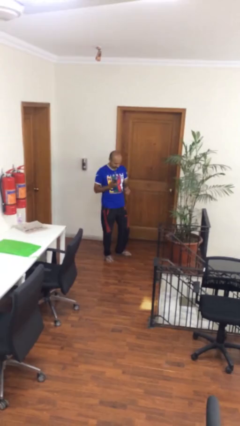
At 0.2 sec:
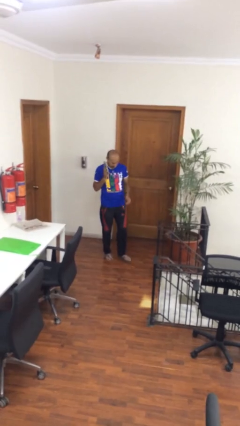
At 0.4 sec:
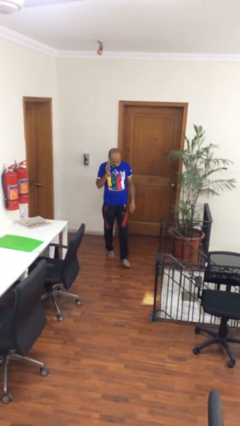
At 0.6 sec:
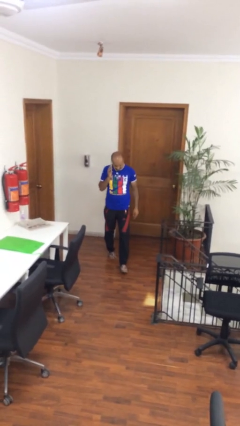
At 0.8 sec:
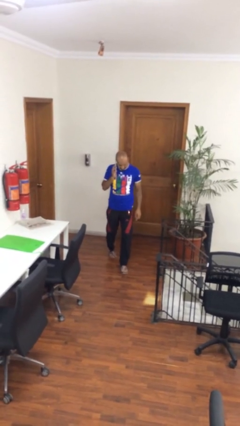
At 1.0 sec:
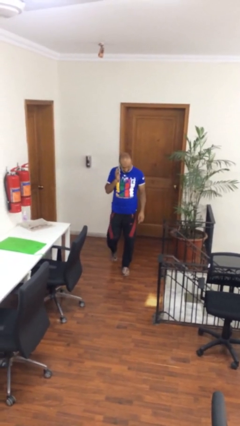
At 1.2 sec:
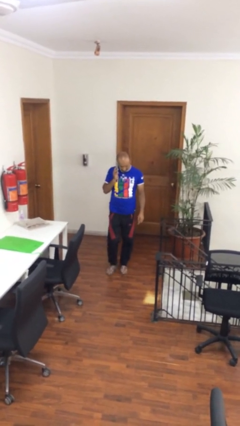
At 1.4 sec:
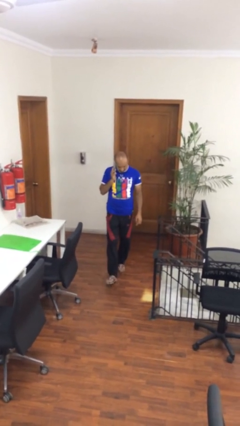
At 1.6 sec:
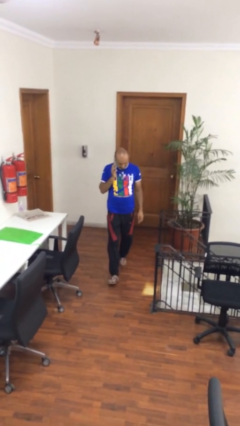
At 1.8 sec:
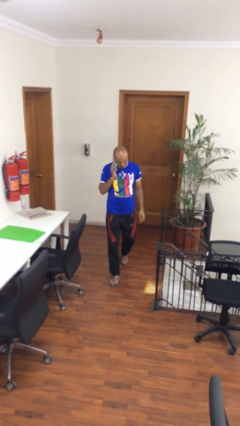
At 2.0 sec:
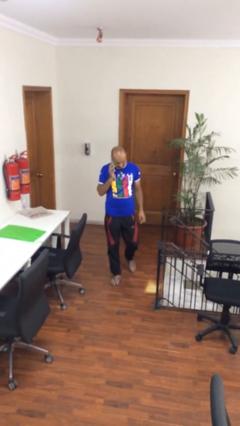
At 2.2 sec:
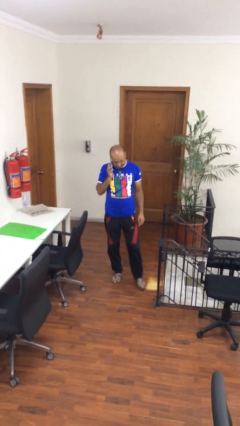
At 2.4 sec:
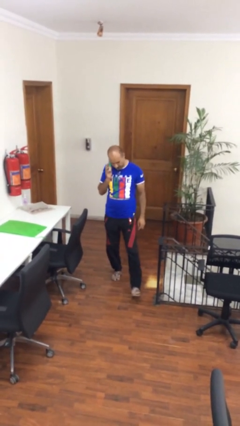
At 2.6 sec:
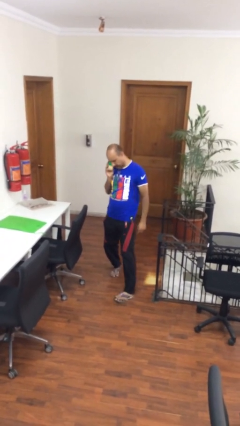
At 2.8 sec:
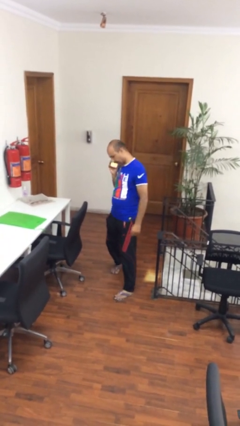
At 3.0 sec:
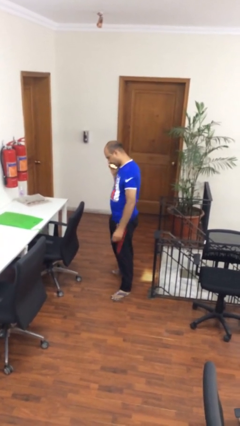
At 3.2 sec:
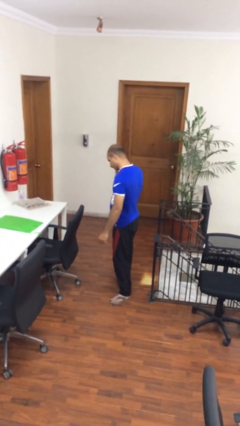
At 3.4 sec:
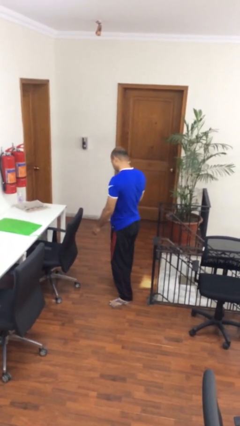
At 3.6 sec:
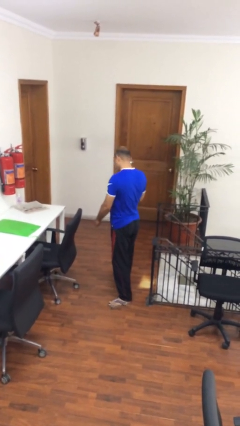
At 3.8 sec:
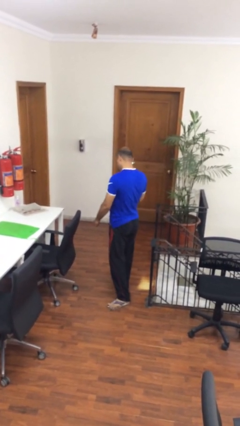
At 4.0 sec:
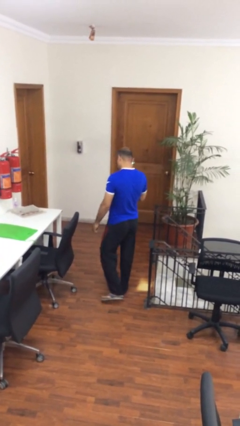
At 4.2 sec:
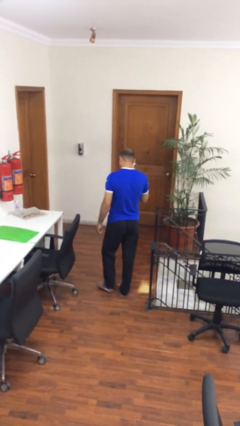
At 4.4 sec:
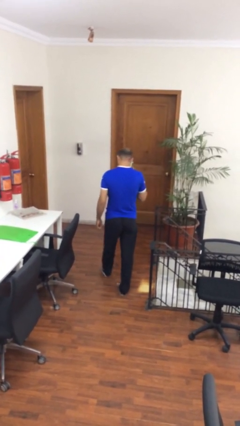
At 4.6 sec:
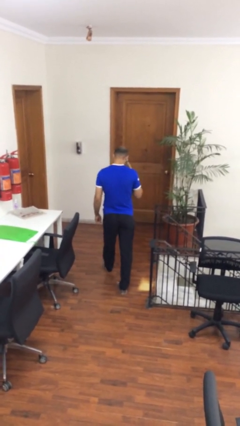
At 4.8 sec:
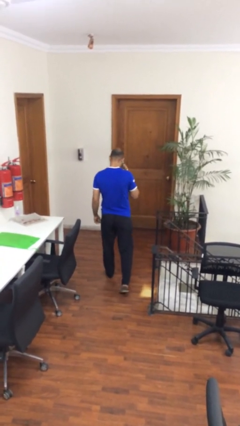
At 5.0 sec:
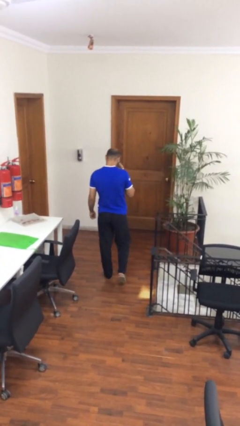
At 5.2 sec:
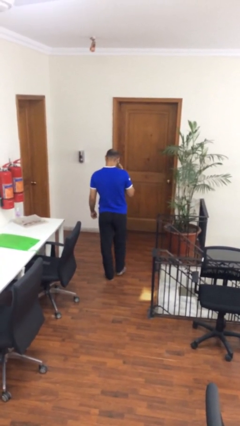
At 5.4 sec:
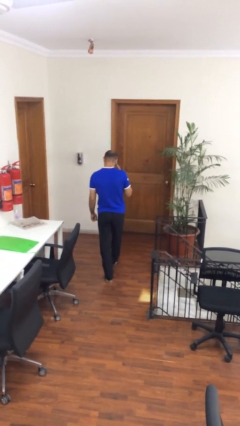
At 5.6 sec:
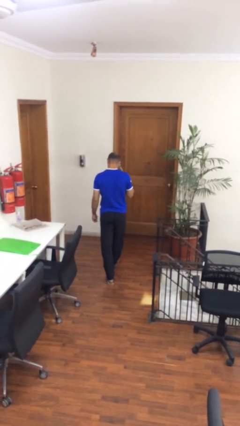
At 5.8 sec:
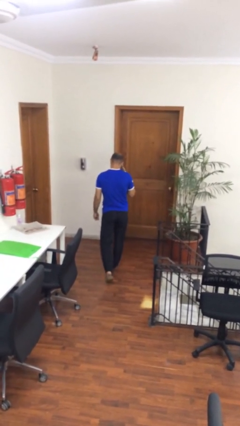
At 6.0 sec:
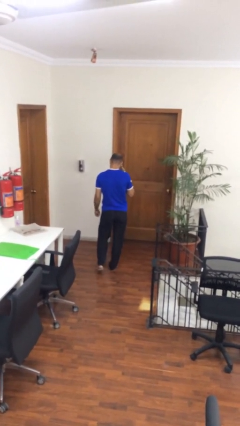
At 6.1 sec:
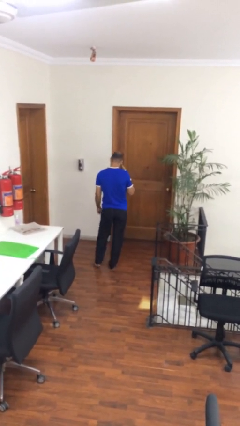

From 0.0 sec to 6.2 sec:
person talks on phone

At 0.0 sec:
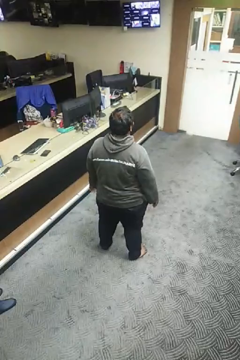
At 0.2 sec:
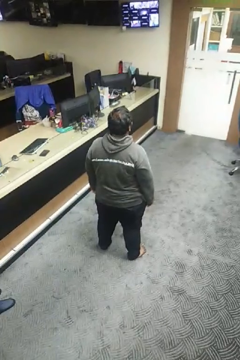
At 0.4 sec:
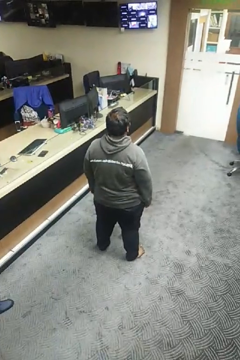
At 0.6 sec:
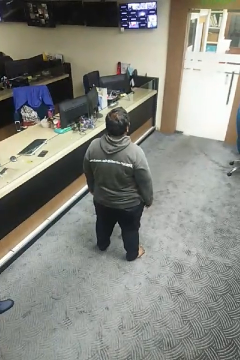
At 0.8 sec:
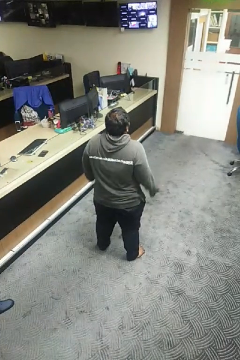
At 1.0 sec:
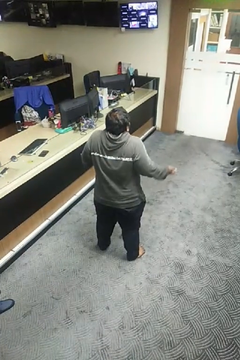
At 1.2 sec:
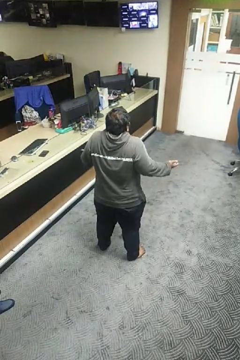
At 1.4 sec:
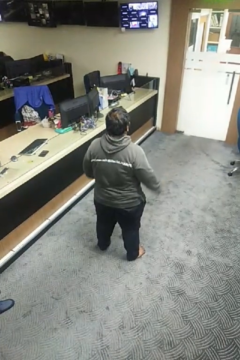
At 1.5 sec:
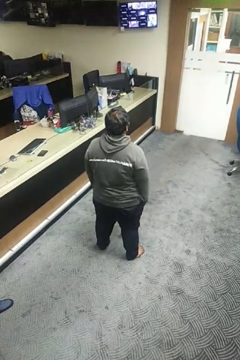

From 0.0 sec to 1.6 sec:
person shrugs

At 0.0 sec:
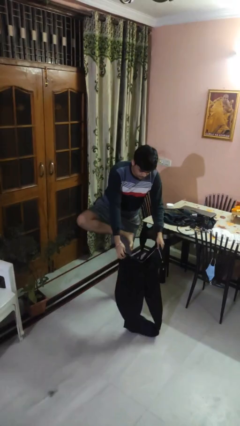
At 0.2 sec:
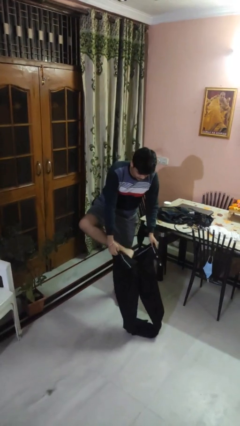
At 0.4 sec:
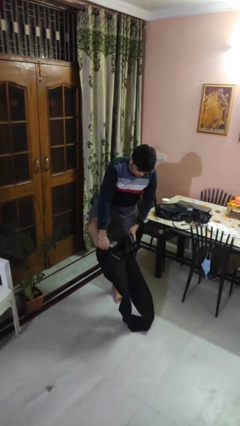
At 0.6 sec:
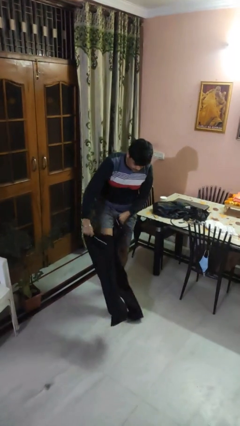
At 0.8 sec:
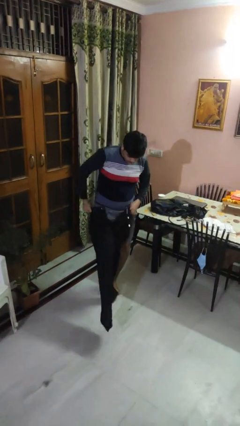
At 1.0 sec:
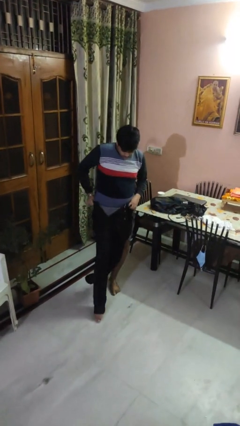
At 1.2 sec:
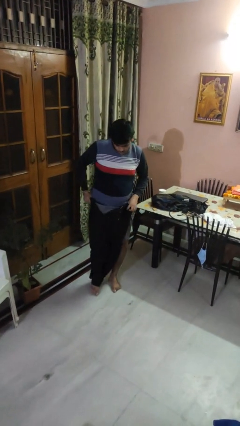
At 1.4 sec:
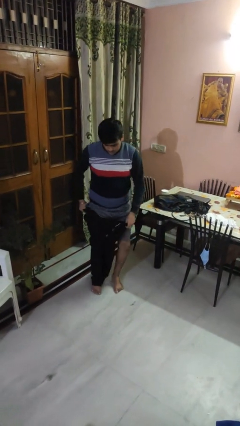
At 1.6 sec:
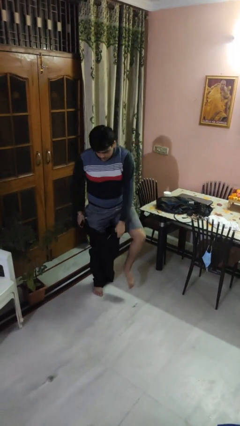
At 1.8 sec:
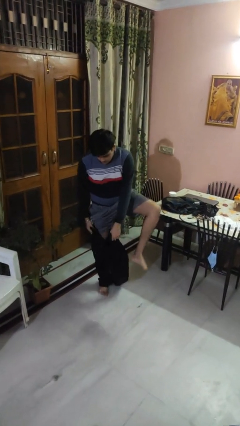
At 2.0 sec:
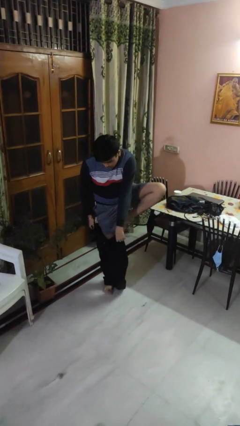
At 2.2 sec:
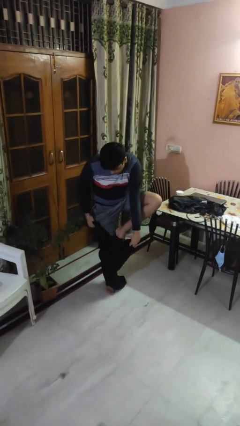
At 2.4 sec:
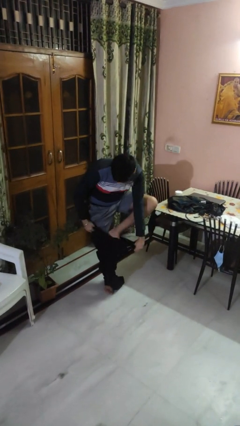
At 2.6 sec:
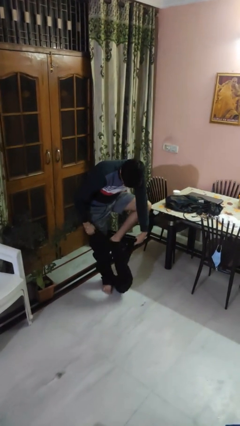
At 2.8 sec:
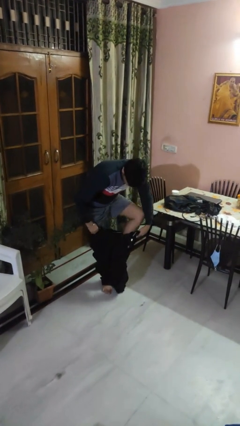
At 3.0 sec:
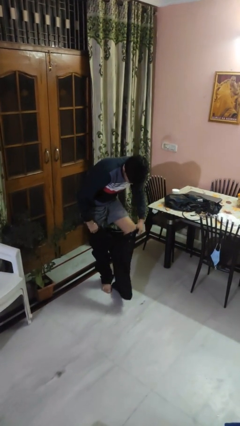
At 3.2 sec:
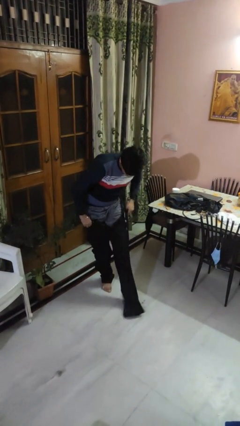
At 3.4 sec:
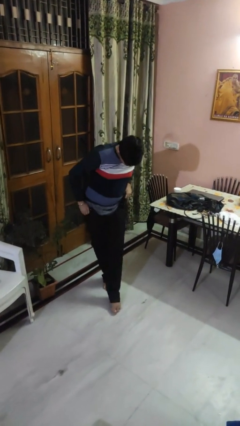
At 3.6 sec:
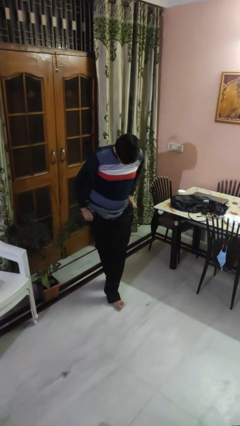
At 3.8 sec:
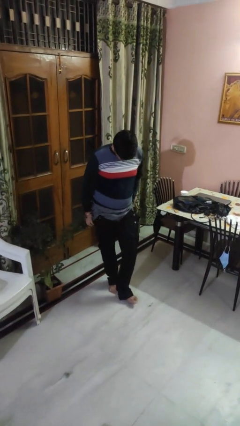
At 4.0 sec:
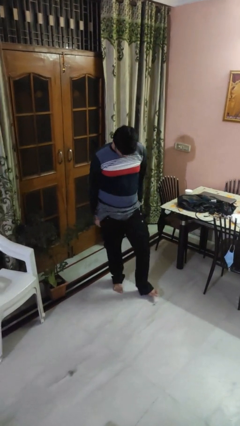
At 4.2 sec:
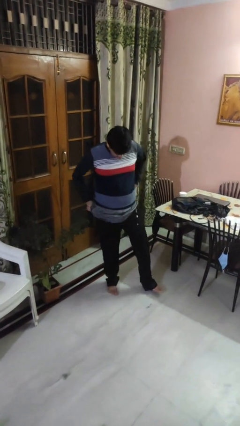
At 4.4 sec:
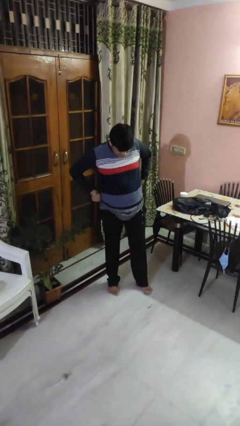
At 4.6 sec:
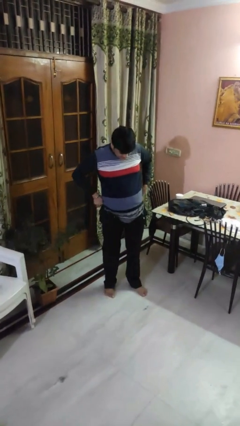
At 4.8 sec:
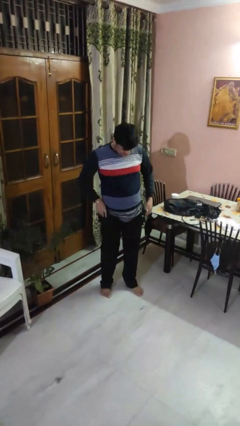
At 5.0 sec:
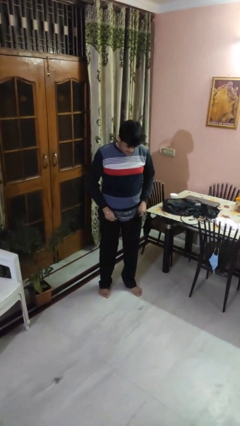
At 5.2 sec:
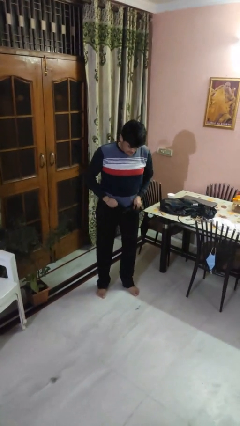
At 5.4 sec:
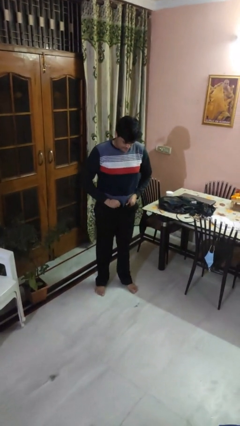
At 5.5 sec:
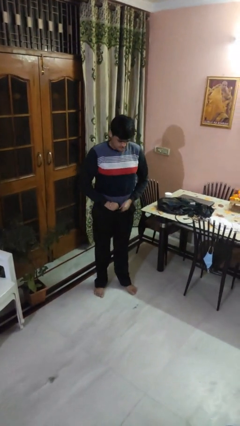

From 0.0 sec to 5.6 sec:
person puts on pants

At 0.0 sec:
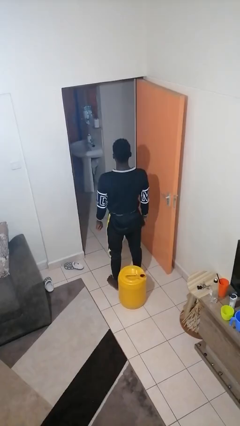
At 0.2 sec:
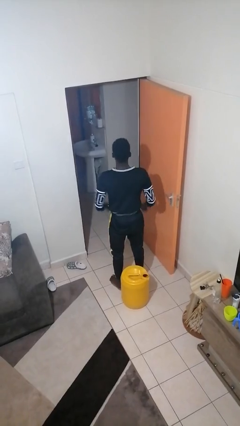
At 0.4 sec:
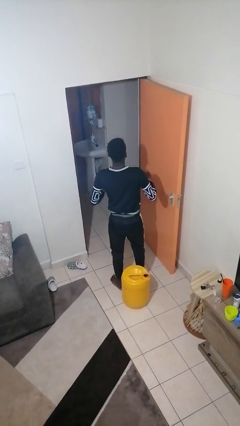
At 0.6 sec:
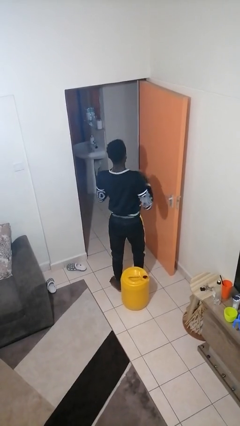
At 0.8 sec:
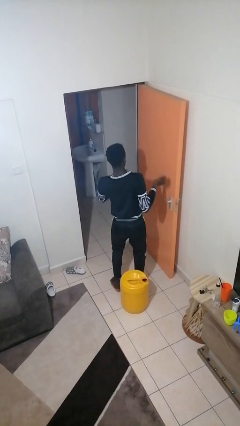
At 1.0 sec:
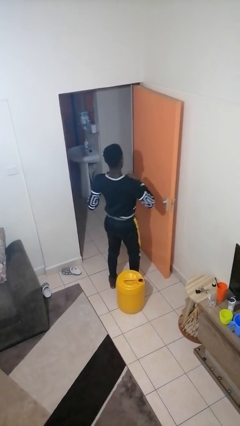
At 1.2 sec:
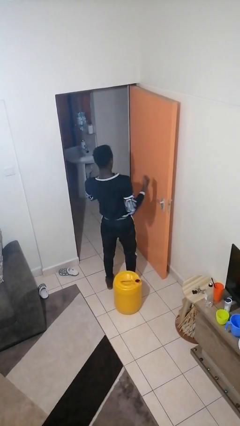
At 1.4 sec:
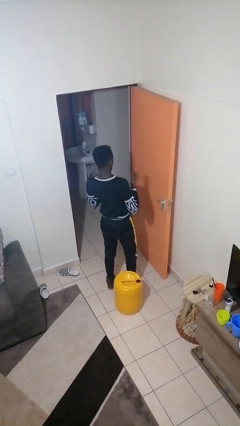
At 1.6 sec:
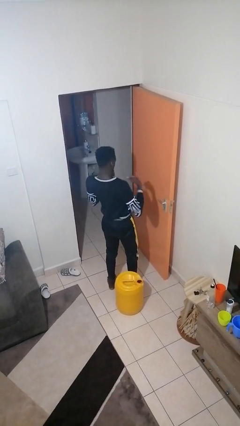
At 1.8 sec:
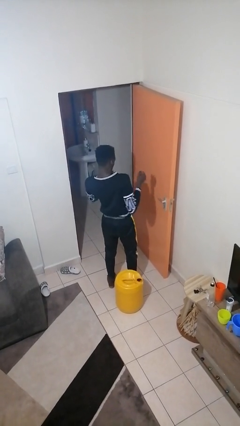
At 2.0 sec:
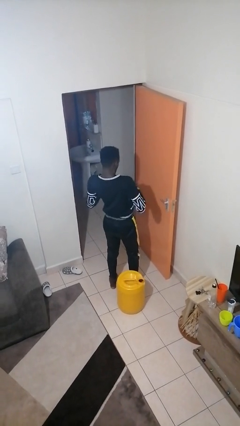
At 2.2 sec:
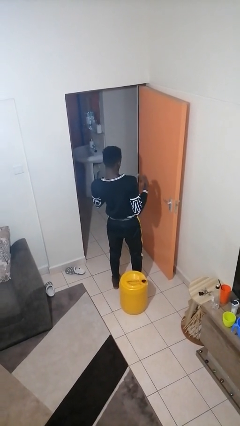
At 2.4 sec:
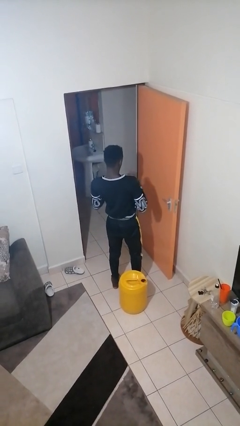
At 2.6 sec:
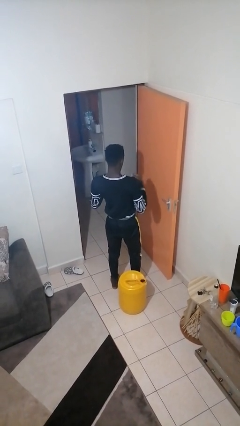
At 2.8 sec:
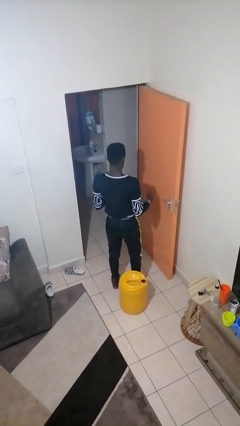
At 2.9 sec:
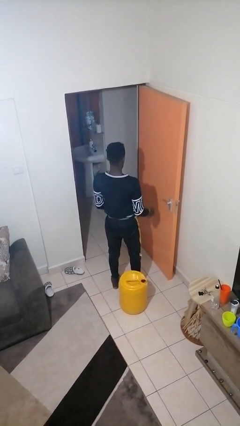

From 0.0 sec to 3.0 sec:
person drums on chest

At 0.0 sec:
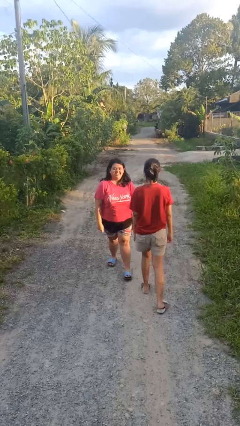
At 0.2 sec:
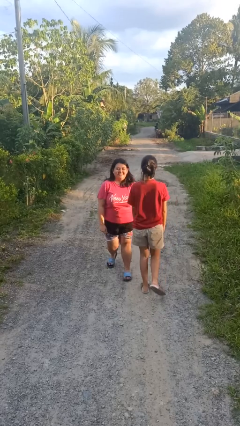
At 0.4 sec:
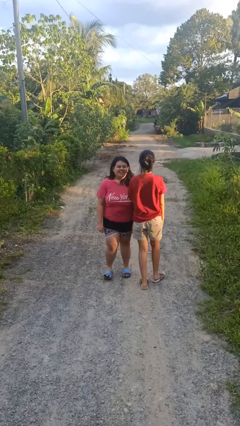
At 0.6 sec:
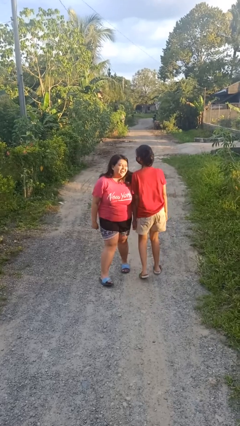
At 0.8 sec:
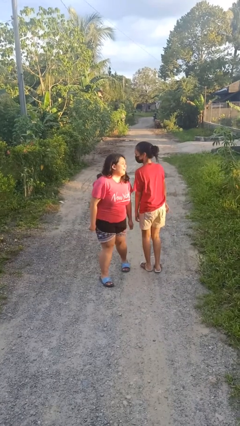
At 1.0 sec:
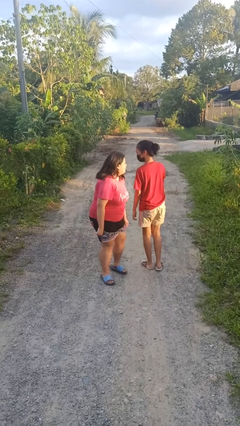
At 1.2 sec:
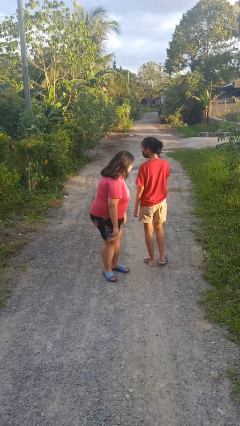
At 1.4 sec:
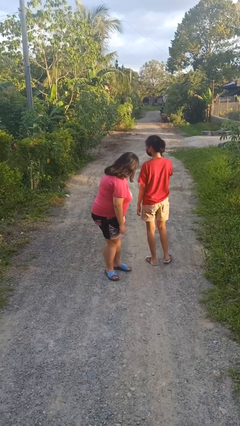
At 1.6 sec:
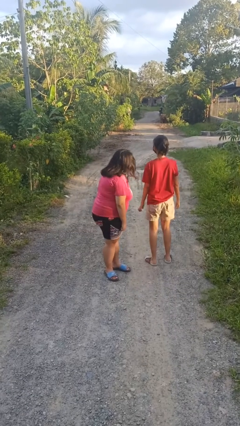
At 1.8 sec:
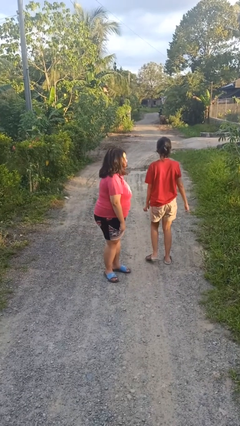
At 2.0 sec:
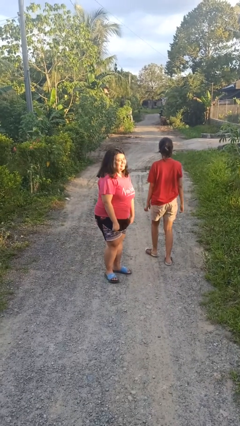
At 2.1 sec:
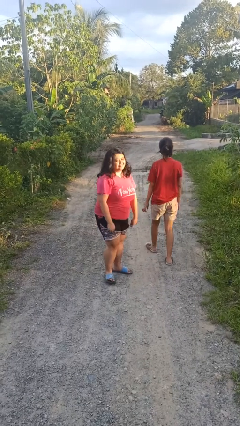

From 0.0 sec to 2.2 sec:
person bumps into person
